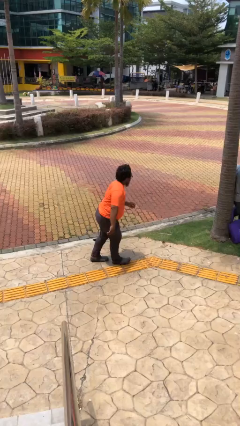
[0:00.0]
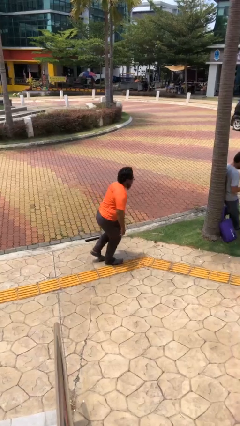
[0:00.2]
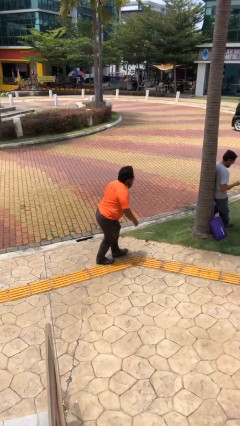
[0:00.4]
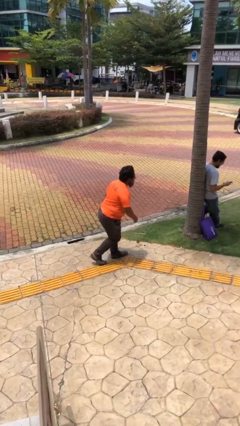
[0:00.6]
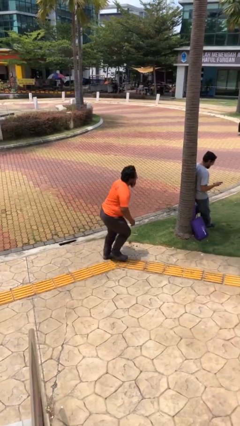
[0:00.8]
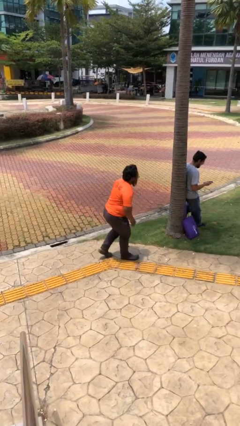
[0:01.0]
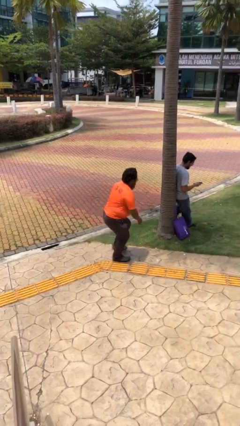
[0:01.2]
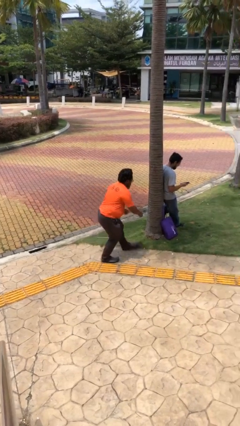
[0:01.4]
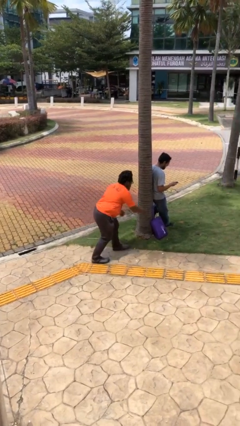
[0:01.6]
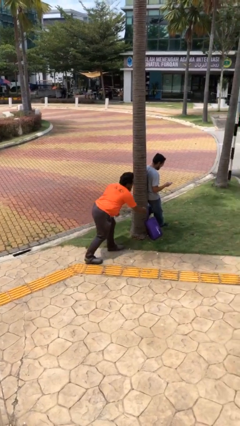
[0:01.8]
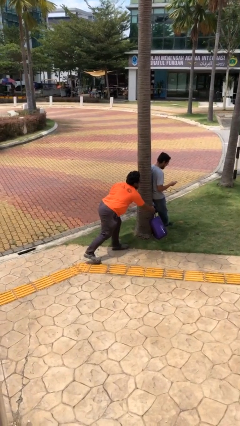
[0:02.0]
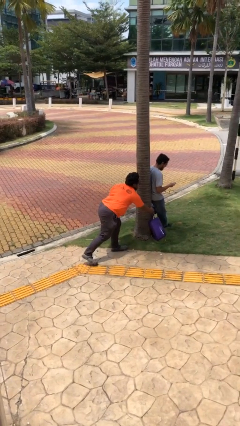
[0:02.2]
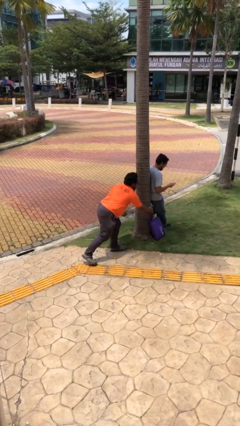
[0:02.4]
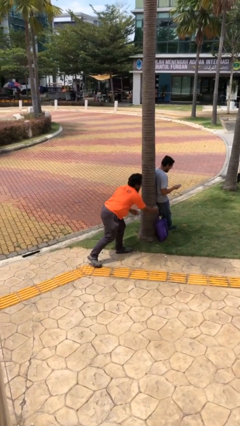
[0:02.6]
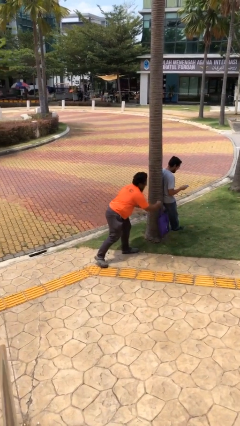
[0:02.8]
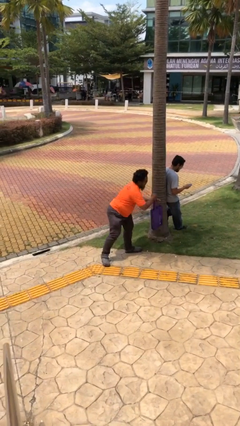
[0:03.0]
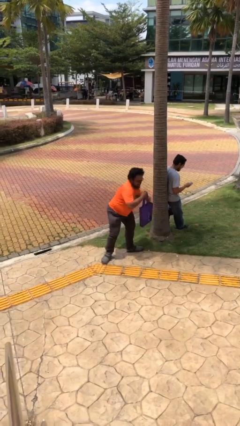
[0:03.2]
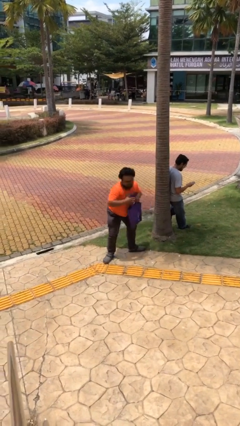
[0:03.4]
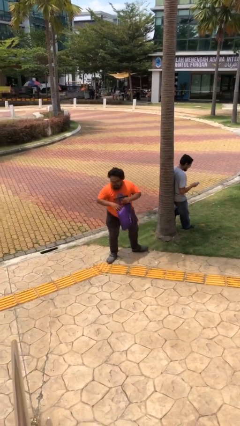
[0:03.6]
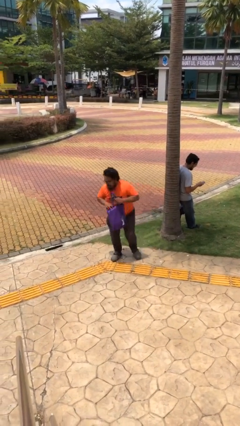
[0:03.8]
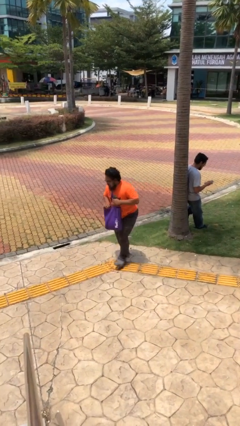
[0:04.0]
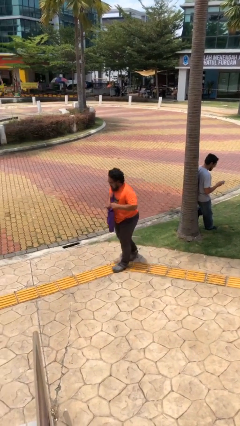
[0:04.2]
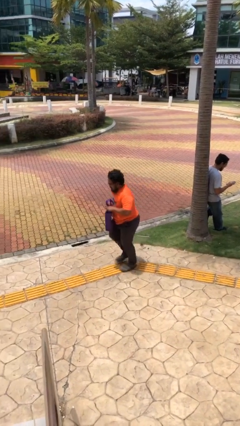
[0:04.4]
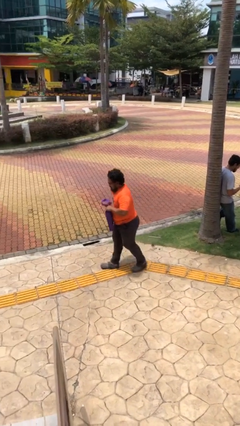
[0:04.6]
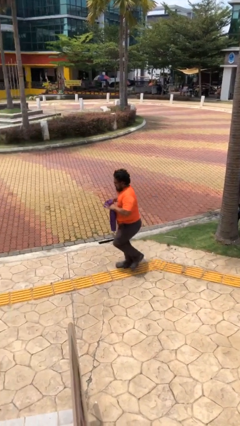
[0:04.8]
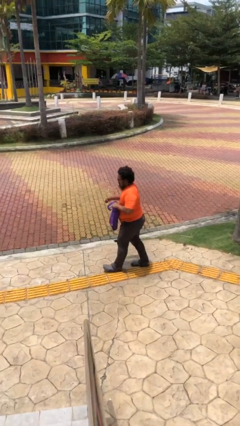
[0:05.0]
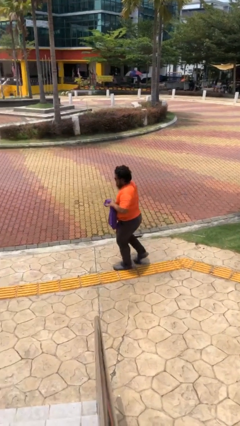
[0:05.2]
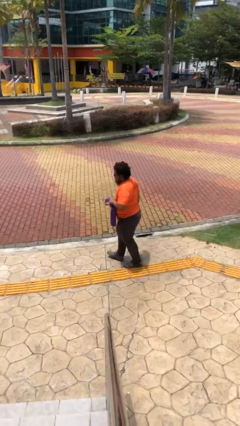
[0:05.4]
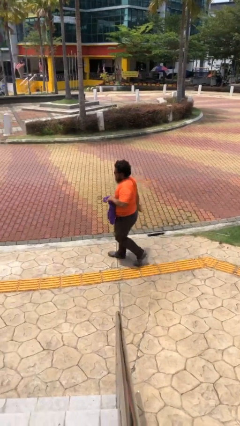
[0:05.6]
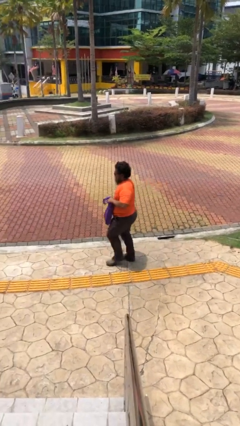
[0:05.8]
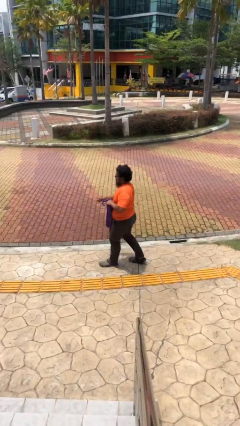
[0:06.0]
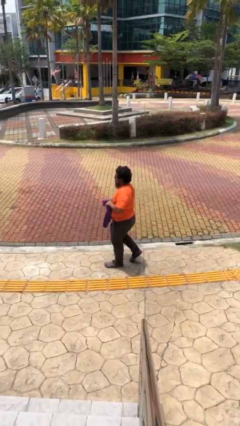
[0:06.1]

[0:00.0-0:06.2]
person steals object from person

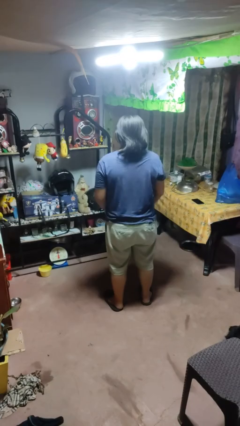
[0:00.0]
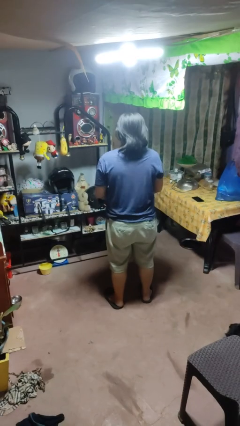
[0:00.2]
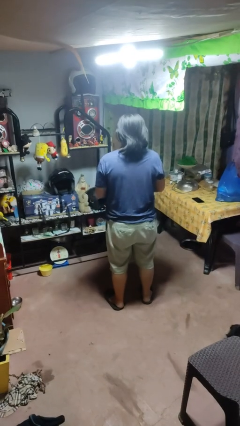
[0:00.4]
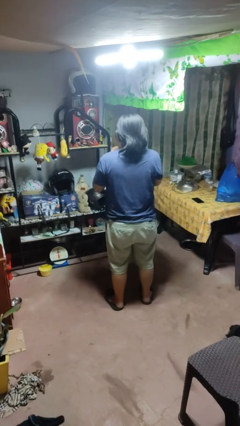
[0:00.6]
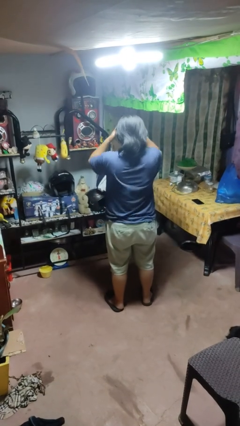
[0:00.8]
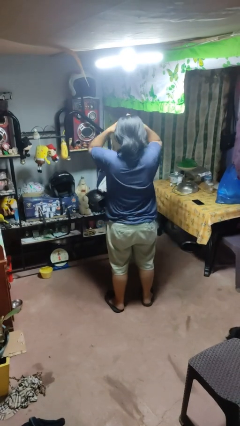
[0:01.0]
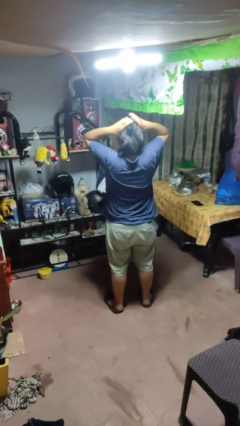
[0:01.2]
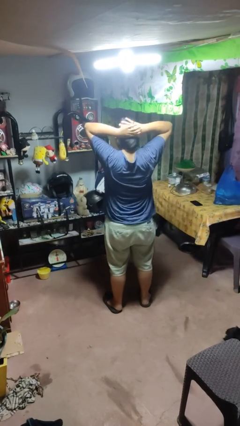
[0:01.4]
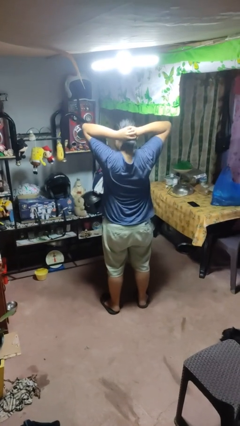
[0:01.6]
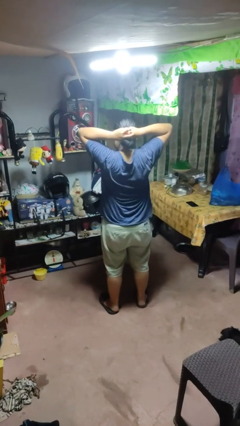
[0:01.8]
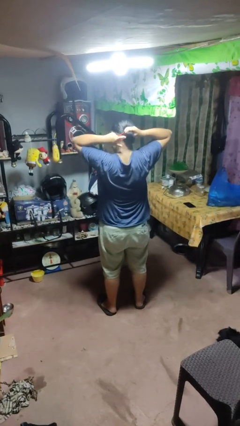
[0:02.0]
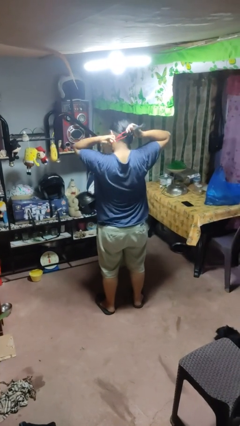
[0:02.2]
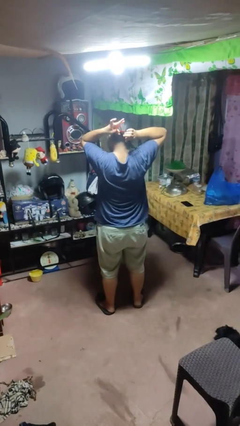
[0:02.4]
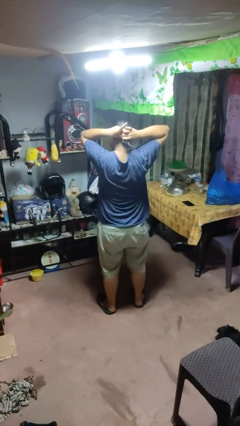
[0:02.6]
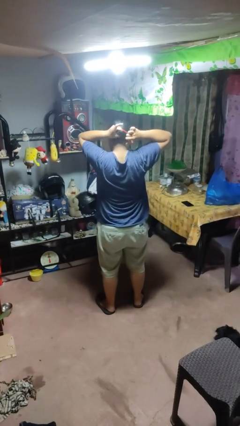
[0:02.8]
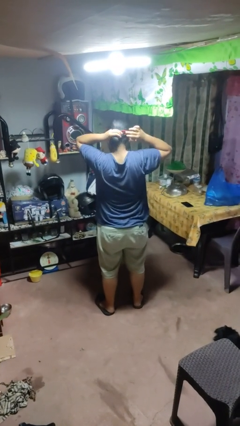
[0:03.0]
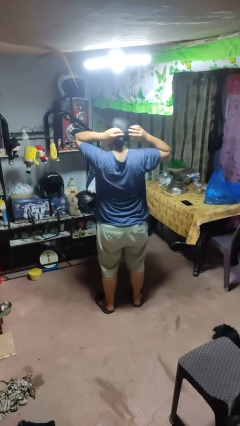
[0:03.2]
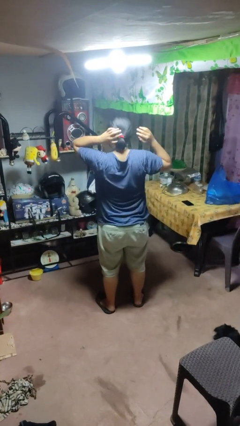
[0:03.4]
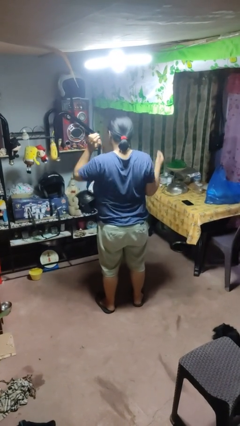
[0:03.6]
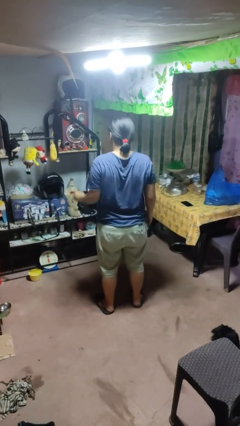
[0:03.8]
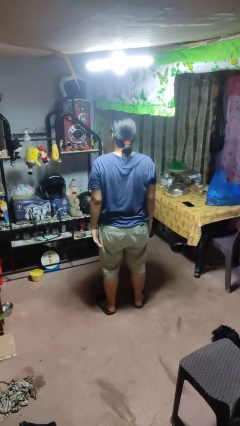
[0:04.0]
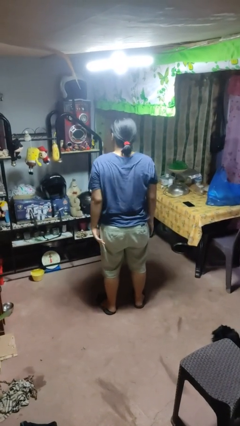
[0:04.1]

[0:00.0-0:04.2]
person puts hair in ponytail

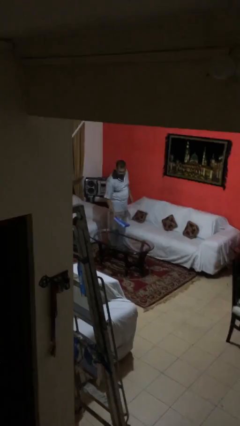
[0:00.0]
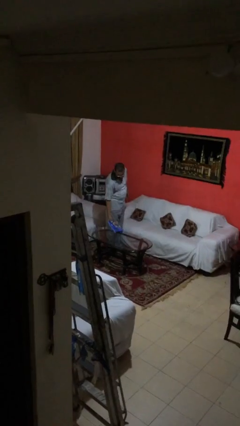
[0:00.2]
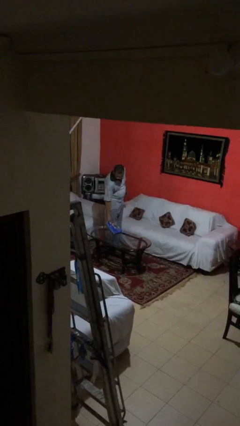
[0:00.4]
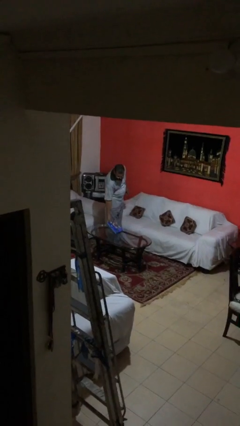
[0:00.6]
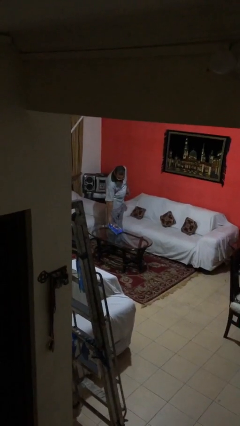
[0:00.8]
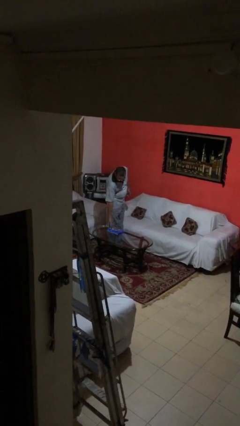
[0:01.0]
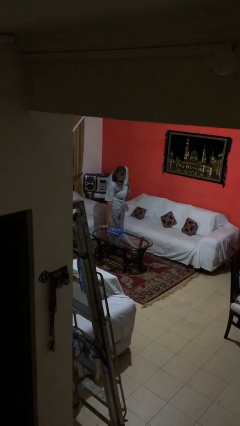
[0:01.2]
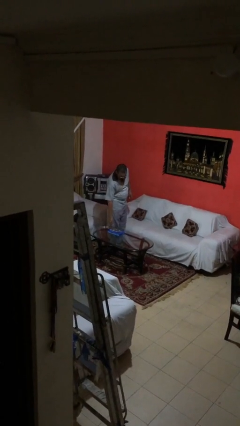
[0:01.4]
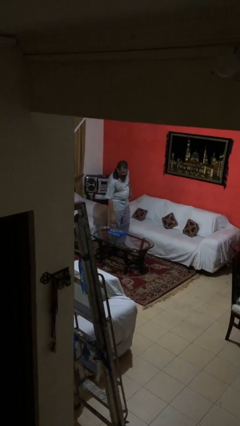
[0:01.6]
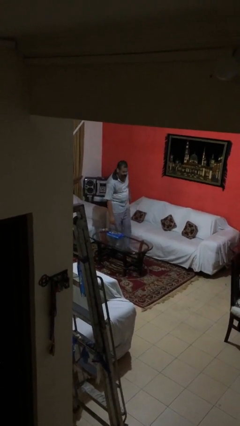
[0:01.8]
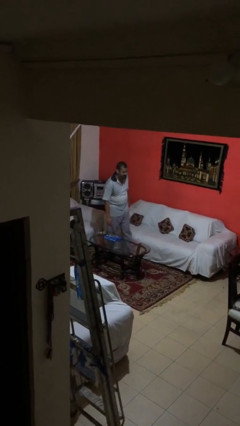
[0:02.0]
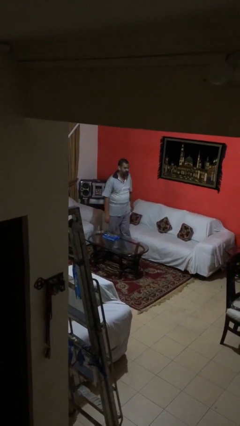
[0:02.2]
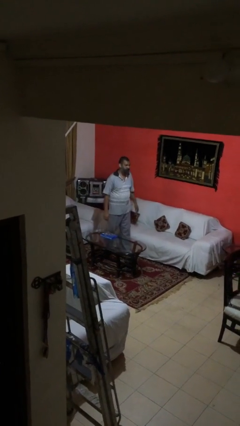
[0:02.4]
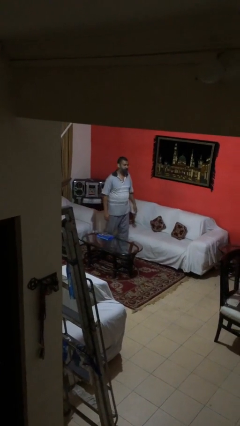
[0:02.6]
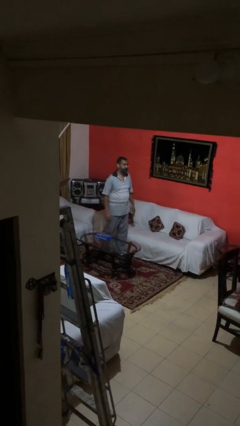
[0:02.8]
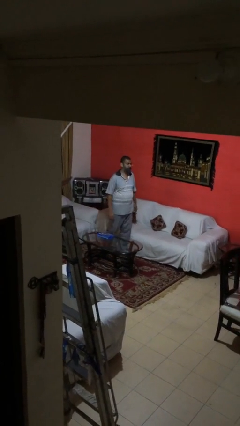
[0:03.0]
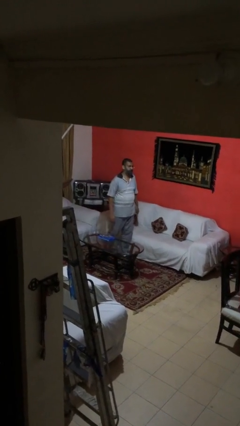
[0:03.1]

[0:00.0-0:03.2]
person puts down object on table

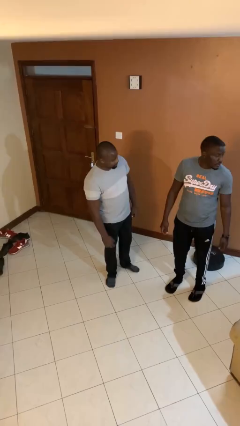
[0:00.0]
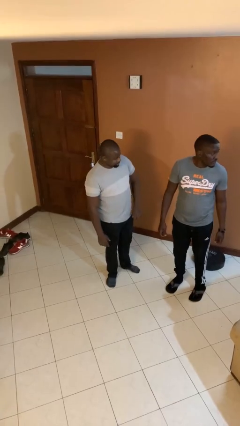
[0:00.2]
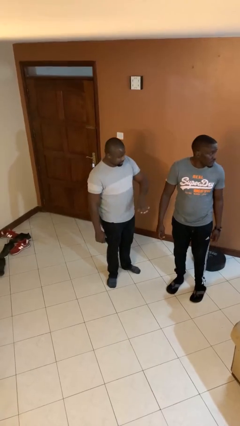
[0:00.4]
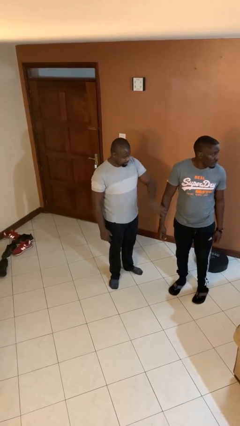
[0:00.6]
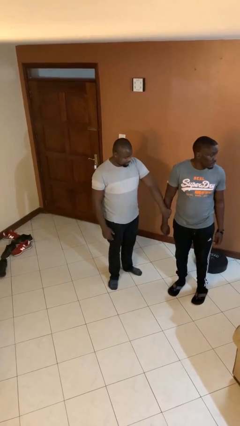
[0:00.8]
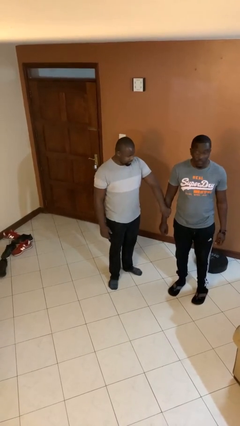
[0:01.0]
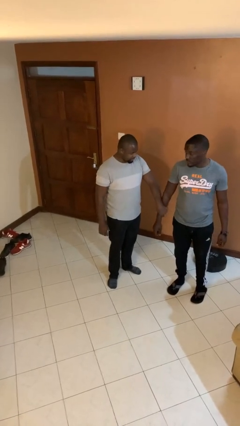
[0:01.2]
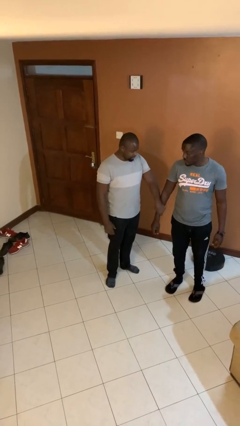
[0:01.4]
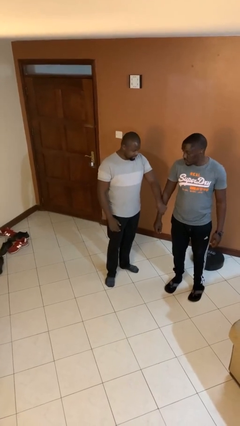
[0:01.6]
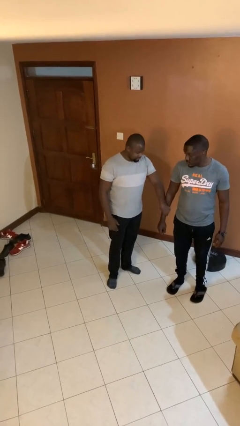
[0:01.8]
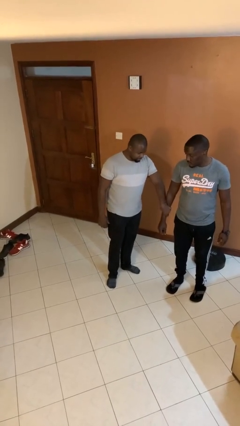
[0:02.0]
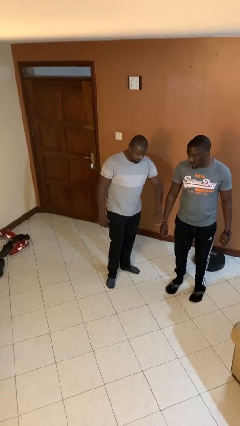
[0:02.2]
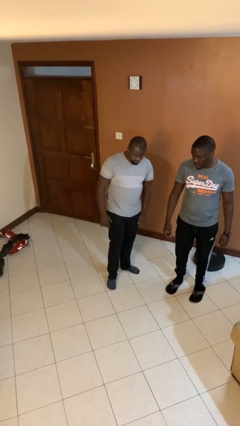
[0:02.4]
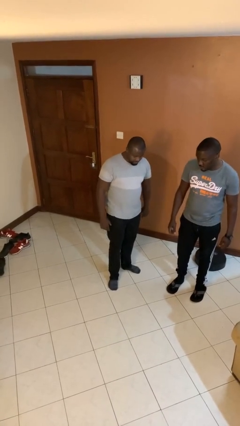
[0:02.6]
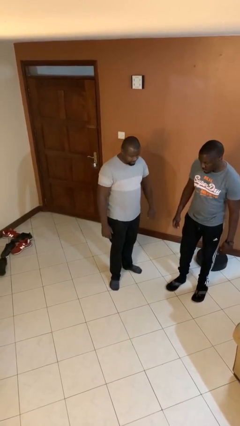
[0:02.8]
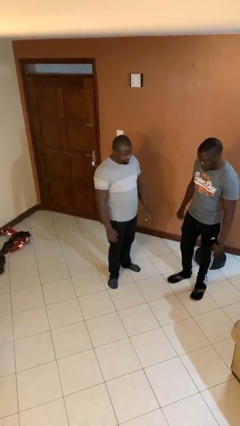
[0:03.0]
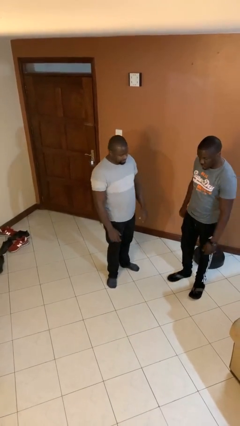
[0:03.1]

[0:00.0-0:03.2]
person grabs person by forearm

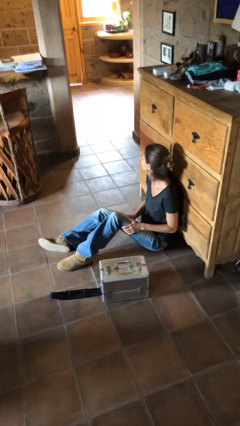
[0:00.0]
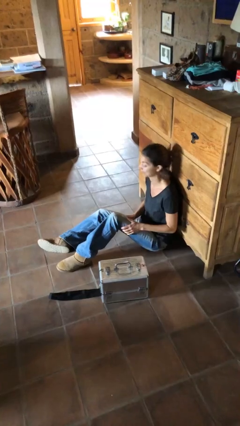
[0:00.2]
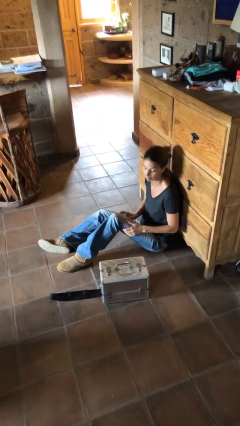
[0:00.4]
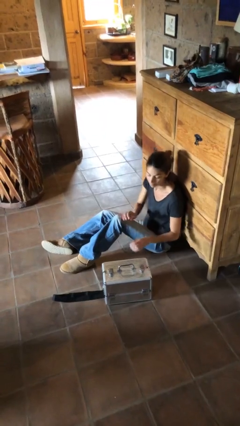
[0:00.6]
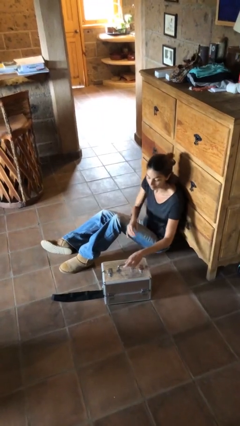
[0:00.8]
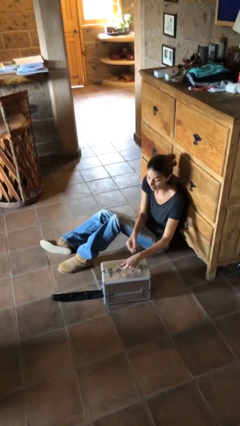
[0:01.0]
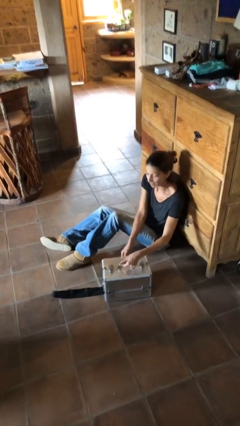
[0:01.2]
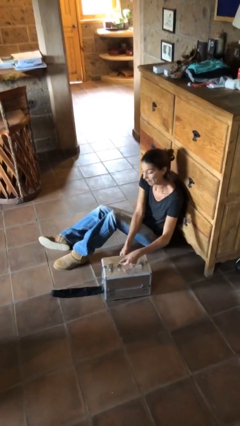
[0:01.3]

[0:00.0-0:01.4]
person picks up object from floor
